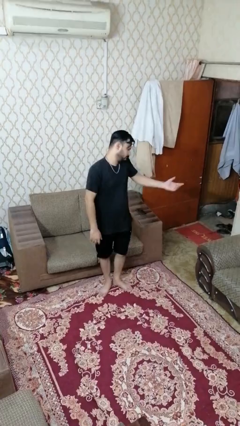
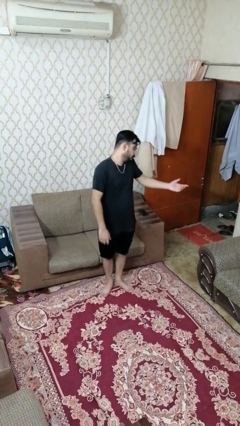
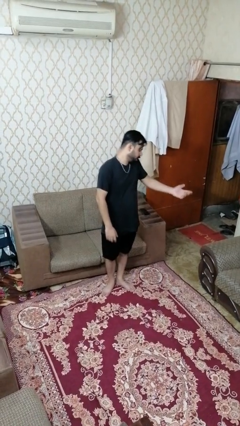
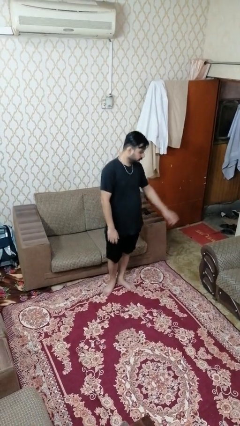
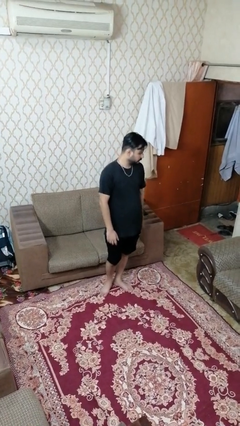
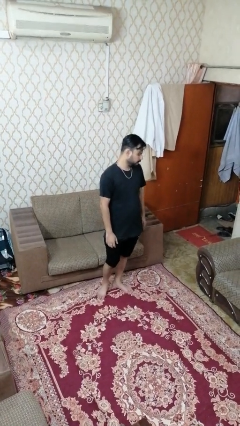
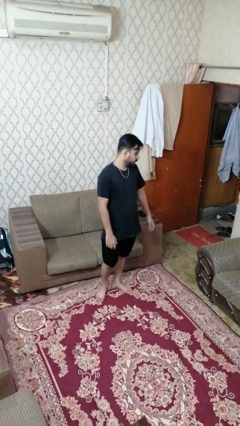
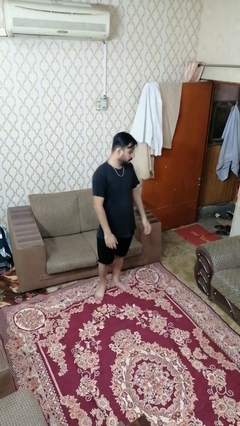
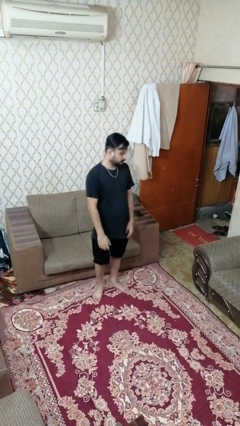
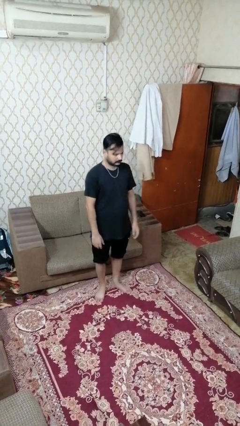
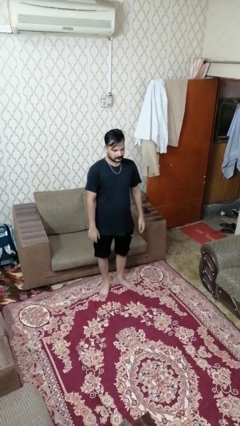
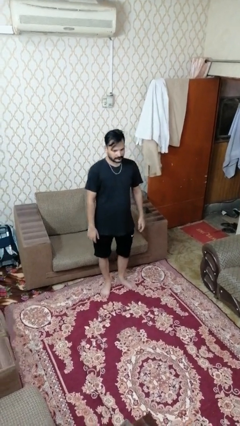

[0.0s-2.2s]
person shrugs

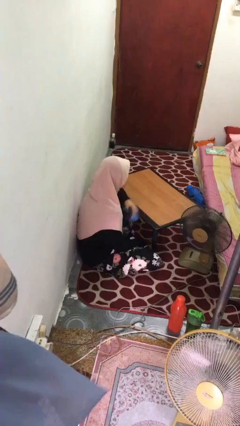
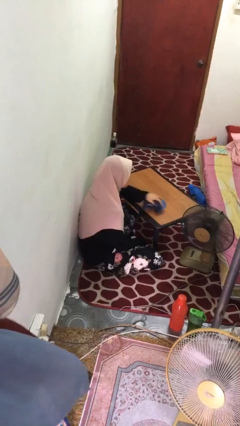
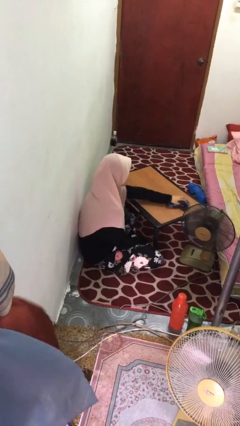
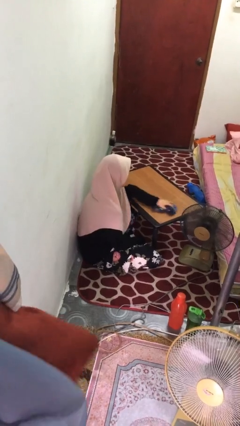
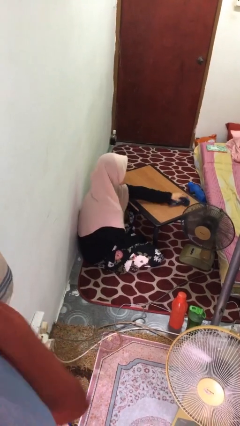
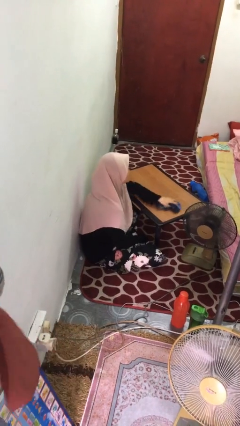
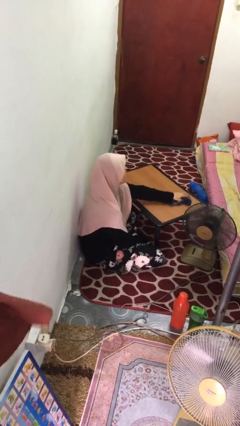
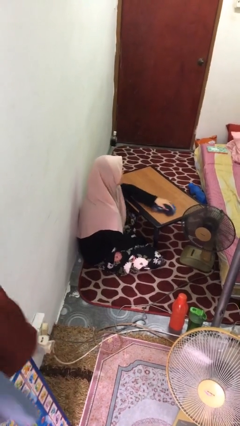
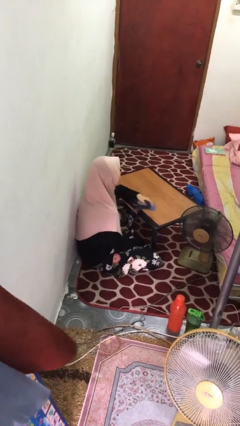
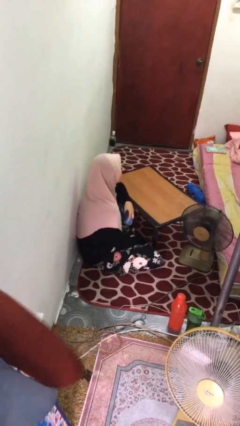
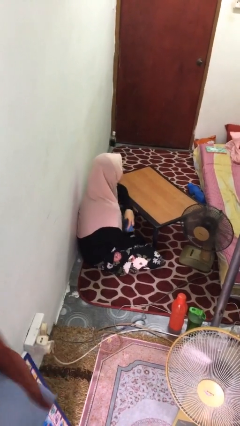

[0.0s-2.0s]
person cleans table with rag

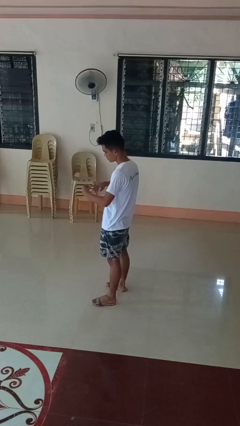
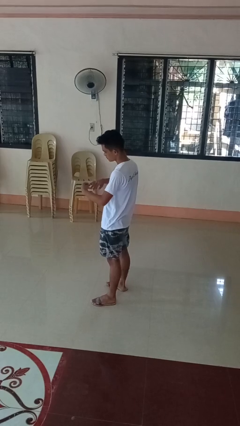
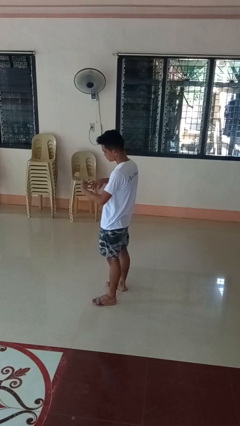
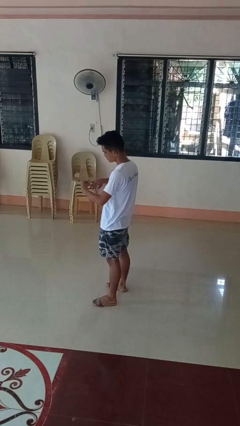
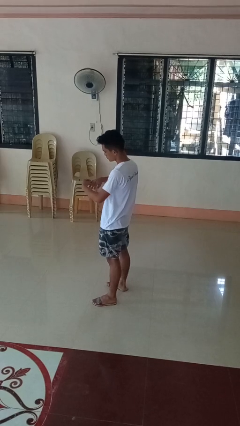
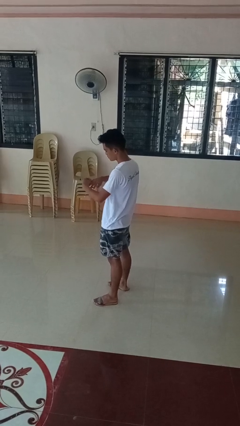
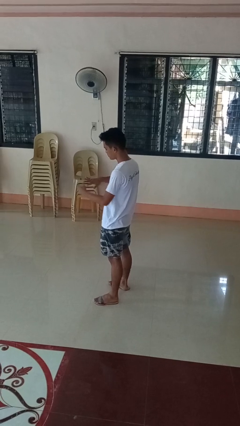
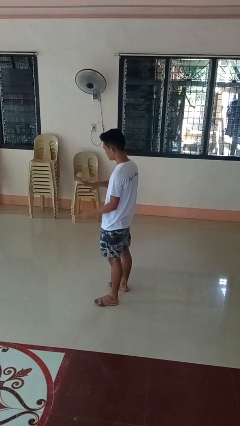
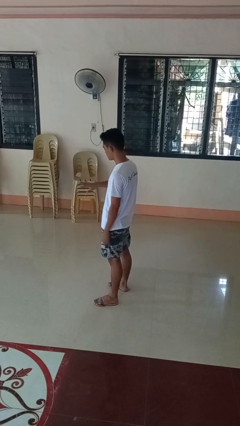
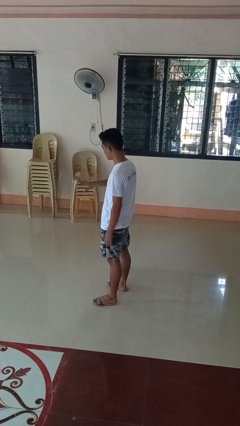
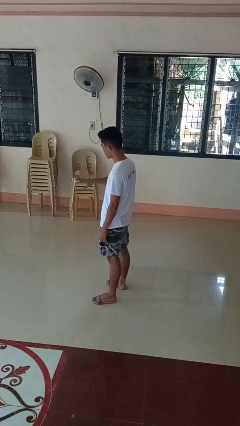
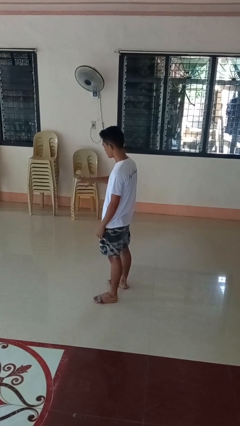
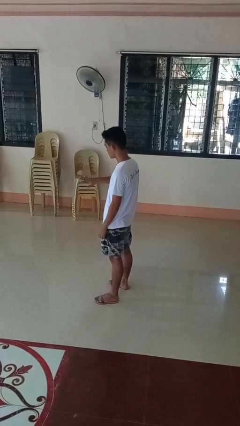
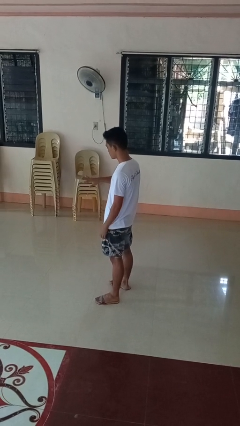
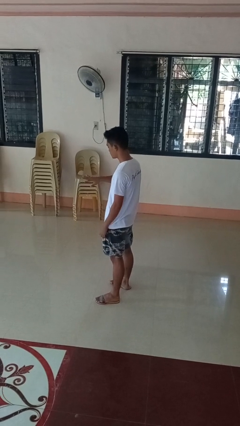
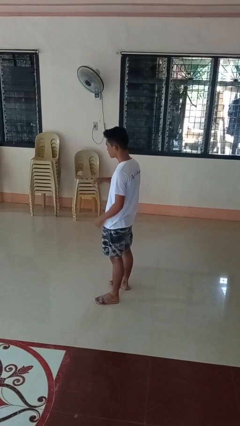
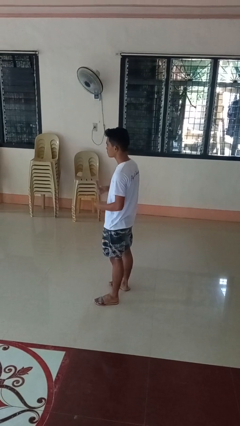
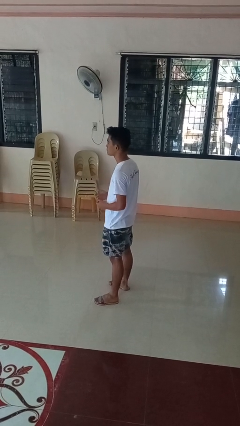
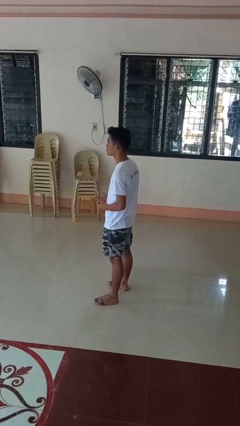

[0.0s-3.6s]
person puts on ring

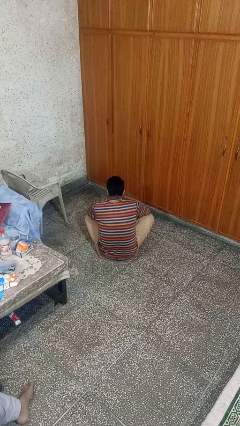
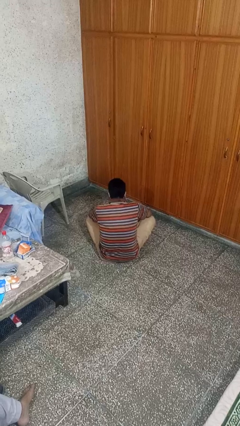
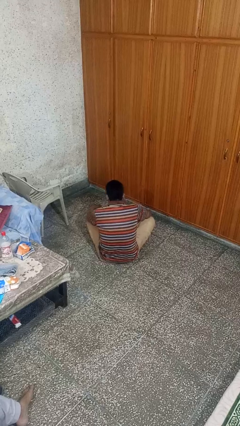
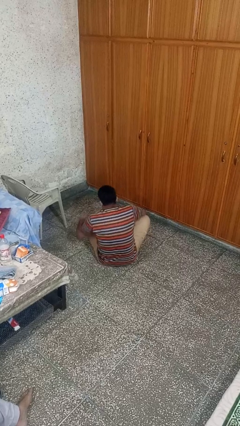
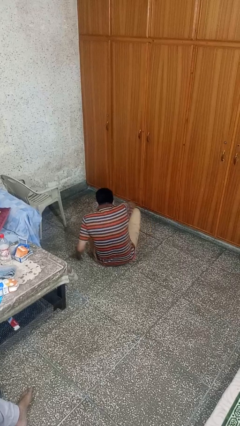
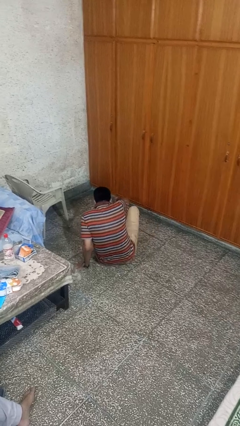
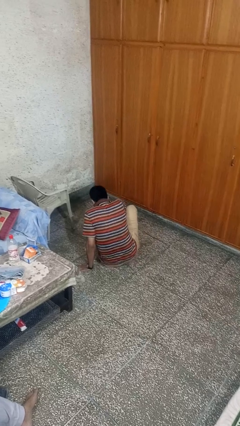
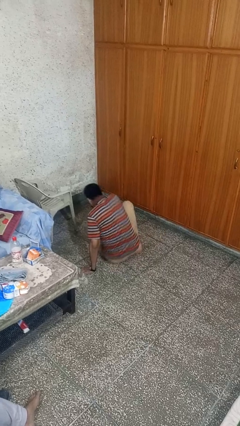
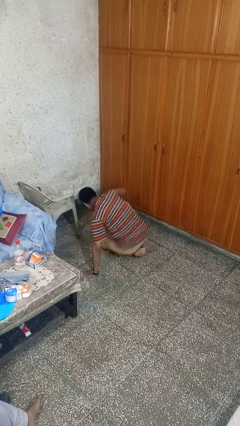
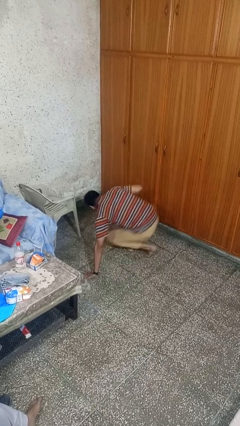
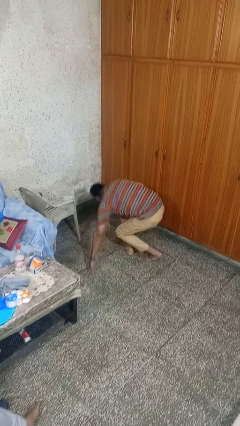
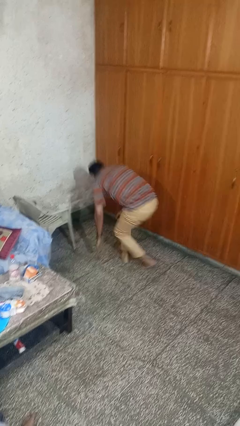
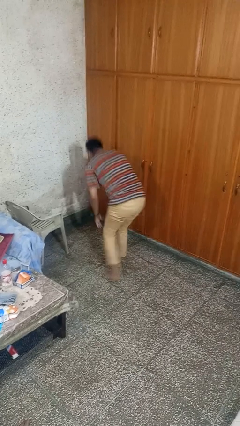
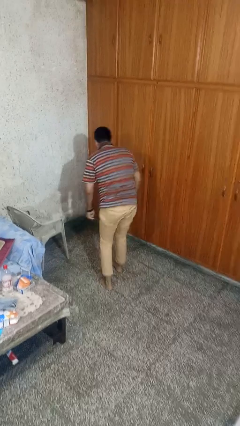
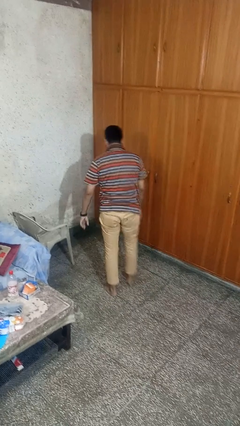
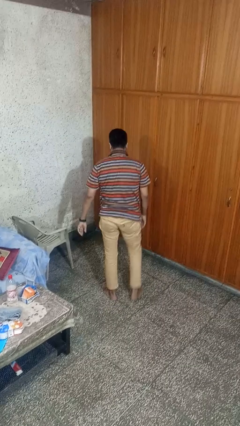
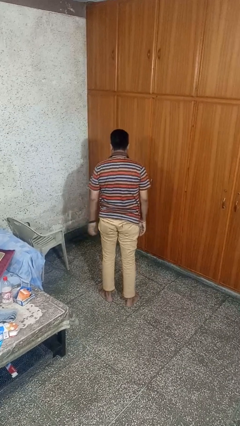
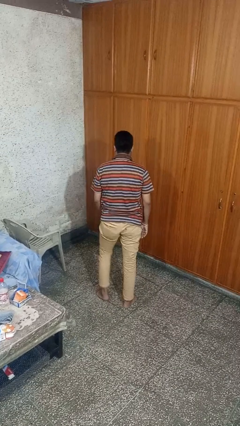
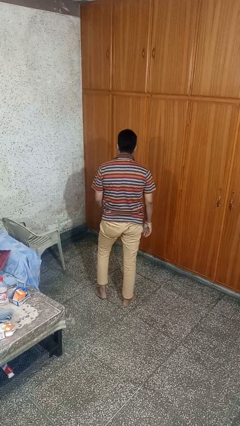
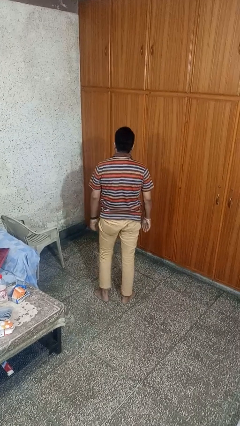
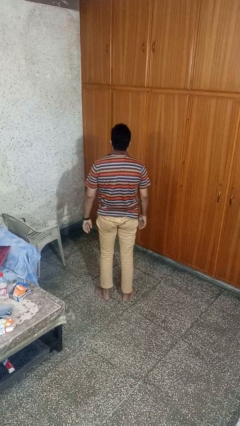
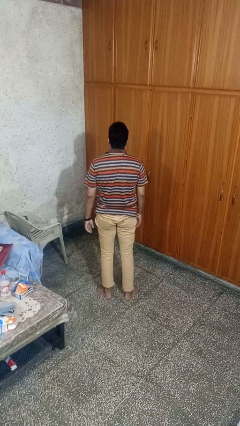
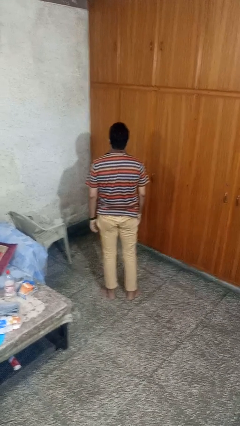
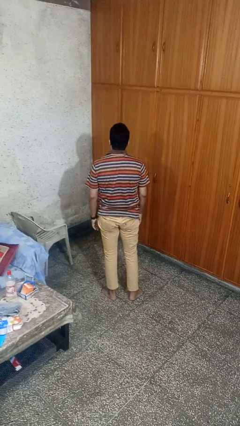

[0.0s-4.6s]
person stands up from floor

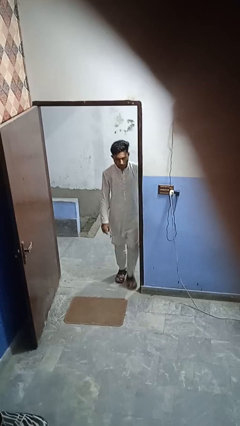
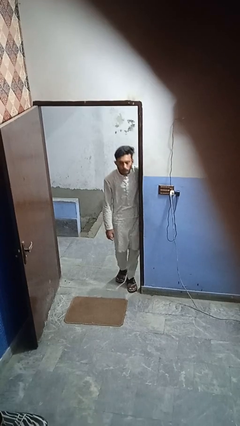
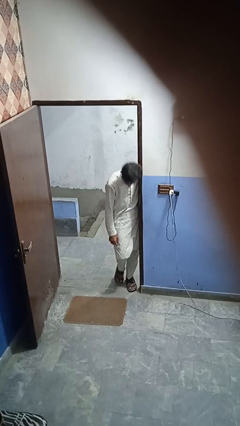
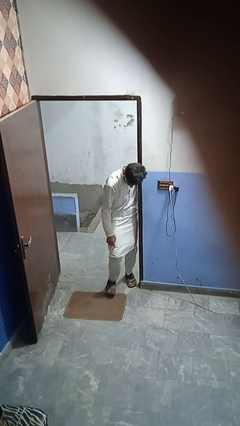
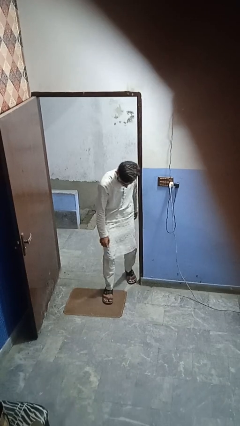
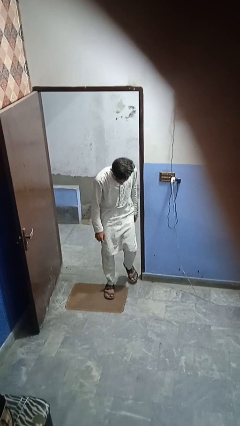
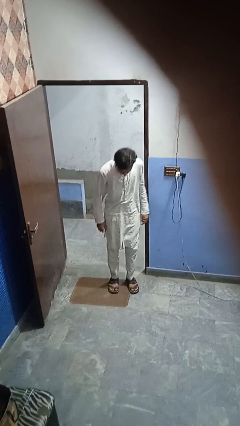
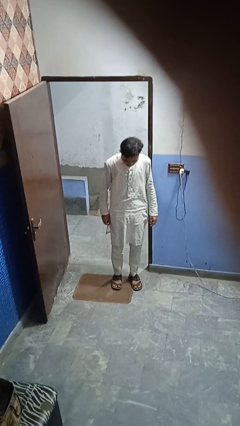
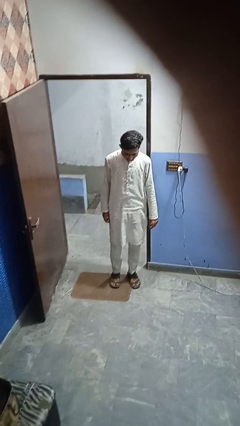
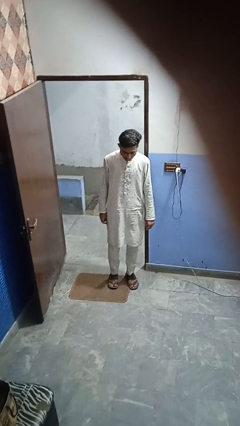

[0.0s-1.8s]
person bumps into wall

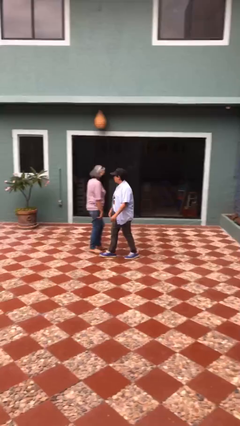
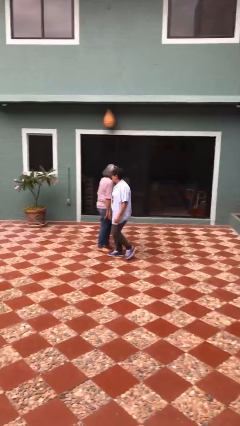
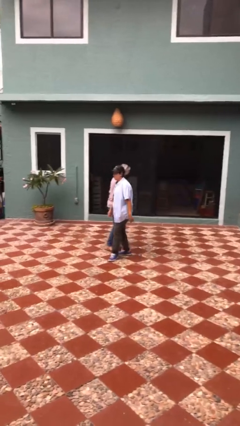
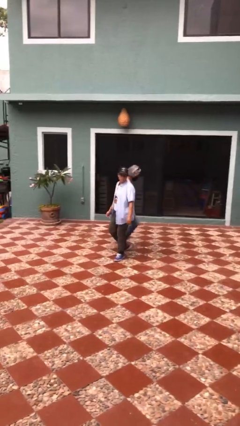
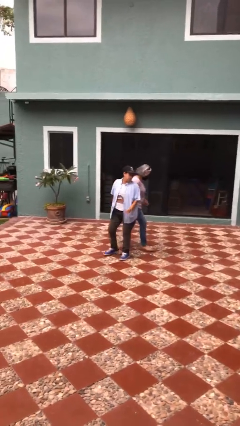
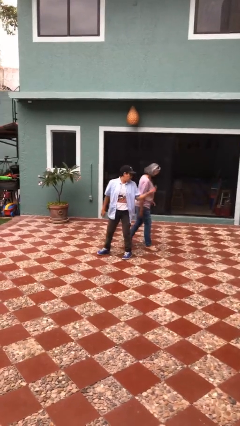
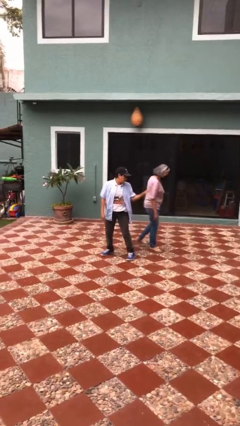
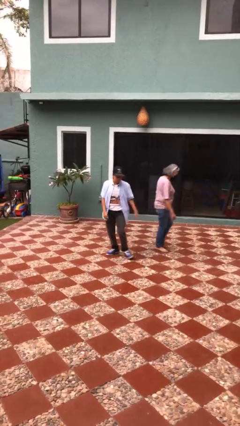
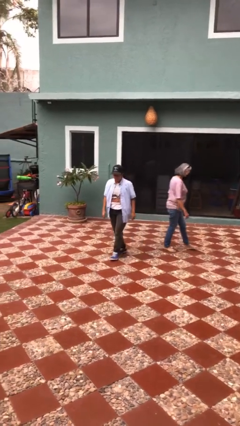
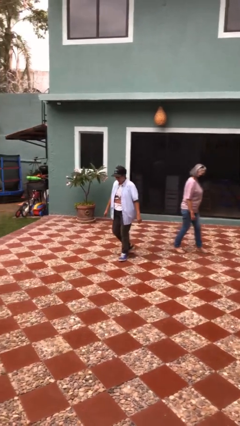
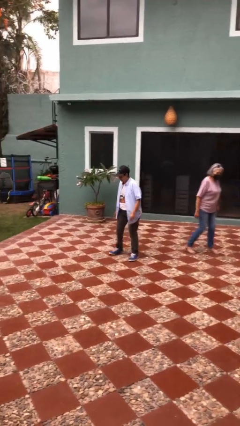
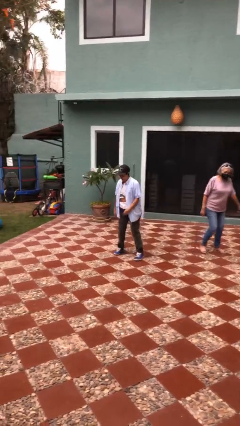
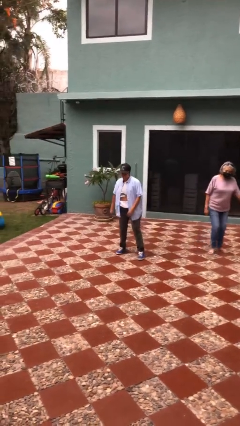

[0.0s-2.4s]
person bumps into person

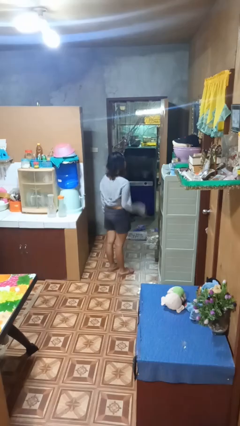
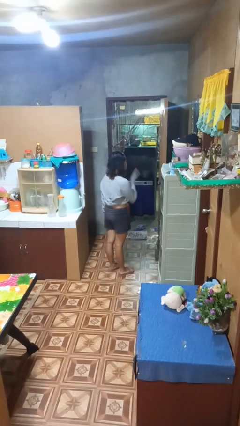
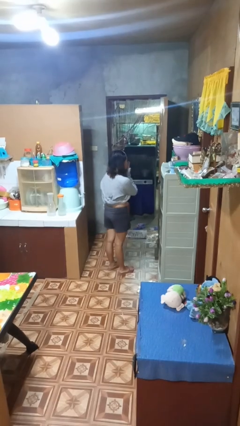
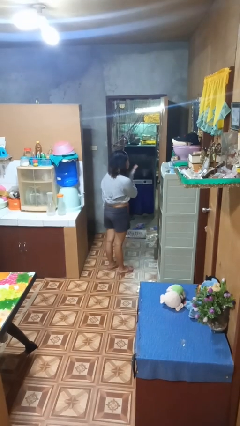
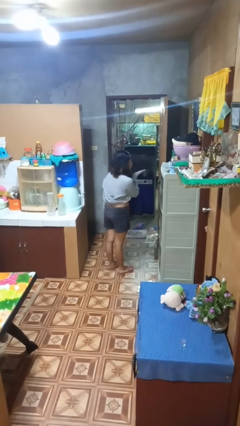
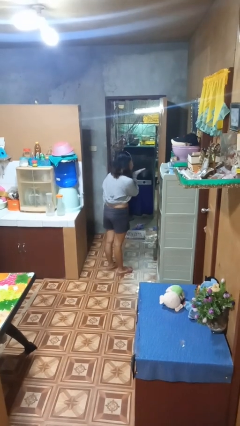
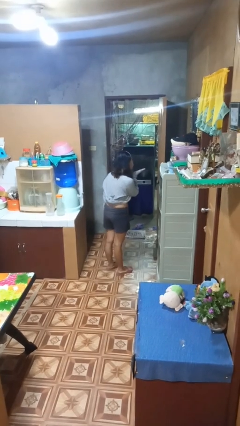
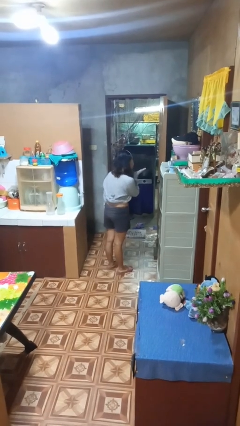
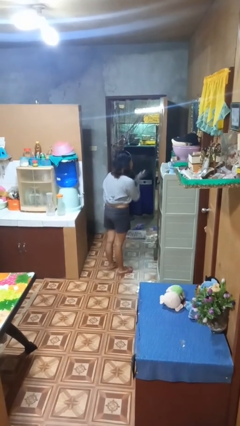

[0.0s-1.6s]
person gestures blow kiss
